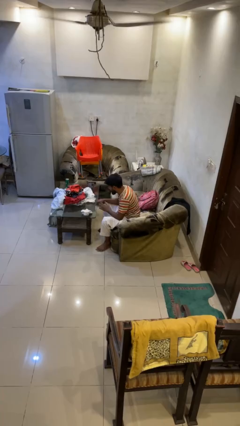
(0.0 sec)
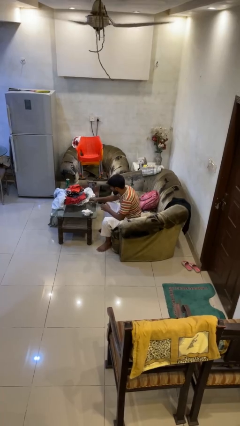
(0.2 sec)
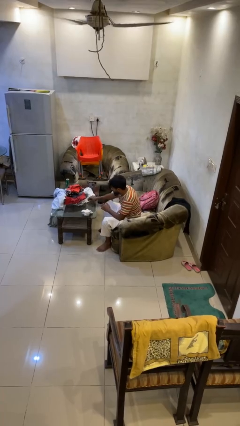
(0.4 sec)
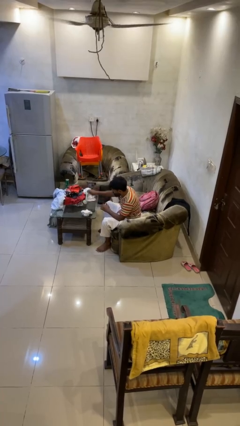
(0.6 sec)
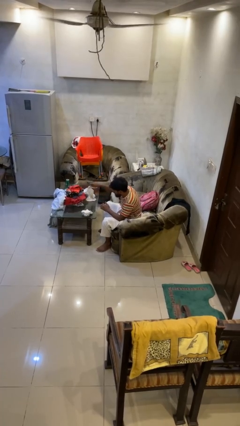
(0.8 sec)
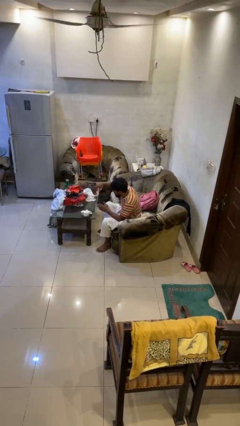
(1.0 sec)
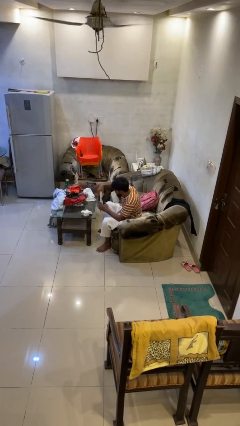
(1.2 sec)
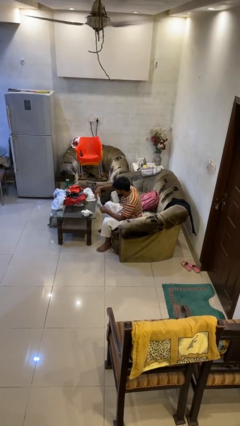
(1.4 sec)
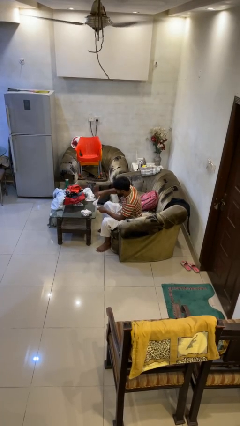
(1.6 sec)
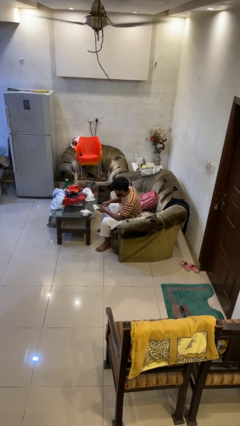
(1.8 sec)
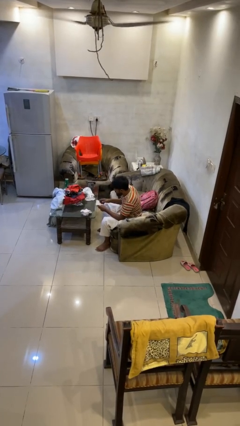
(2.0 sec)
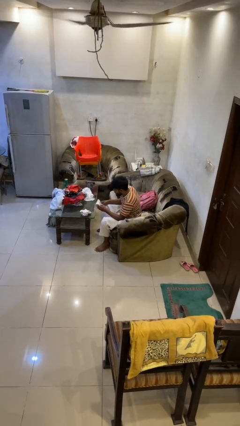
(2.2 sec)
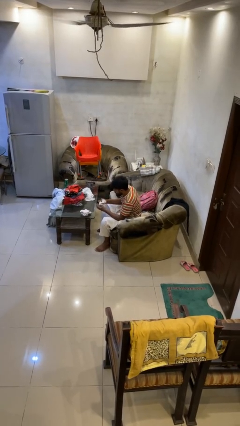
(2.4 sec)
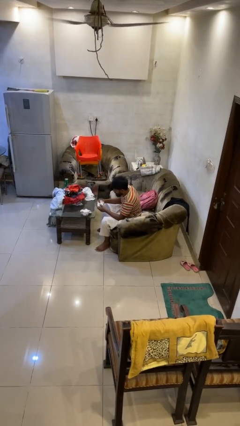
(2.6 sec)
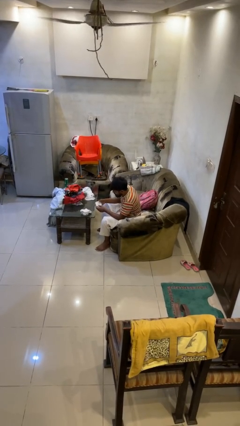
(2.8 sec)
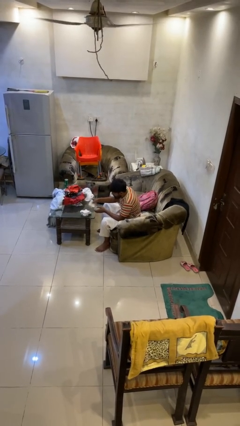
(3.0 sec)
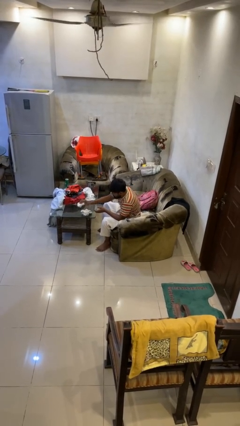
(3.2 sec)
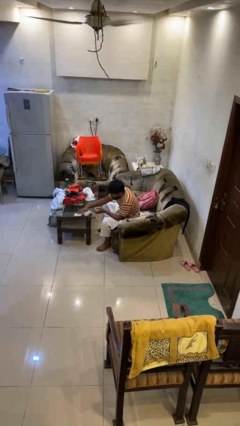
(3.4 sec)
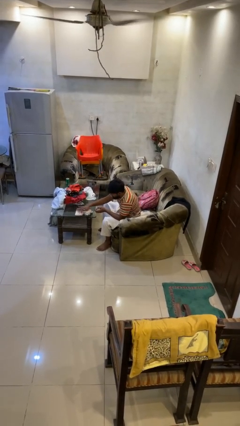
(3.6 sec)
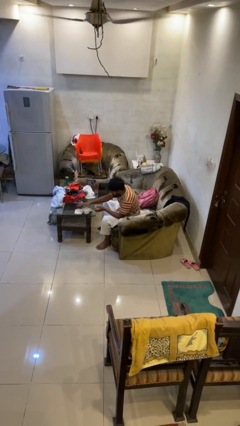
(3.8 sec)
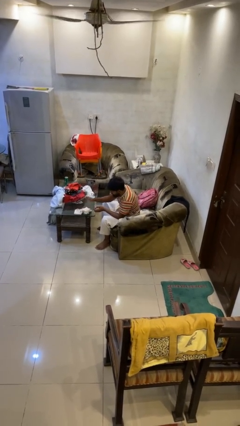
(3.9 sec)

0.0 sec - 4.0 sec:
person folds socks

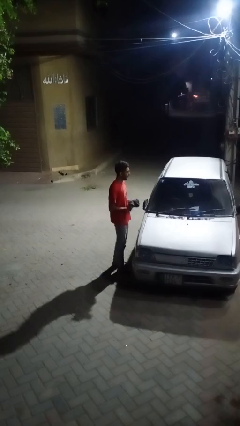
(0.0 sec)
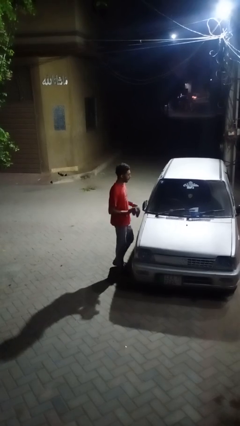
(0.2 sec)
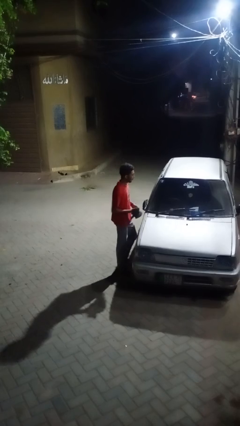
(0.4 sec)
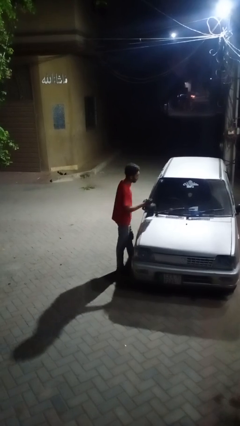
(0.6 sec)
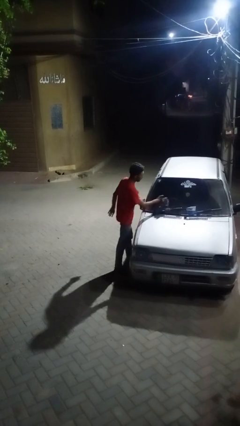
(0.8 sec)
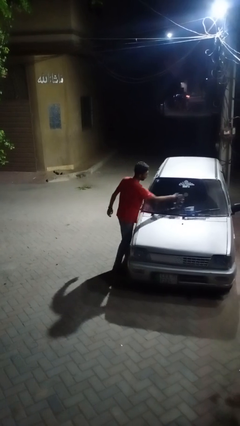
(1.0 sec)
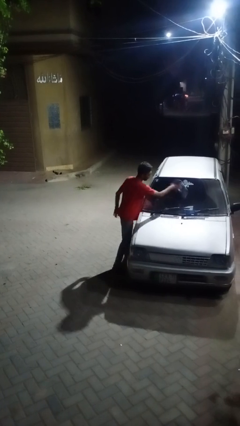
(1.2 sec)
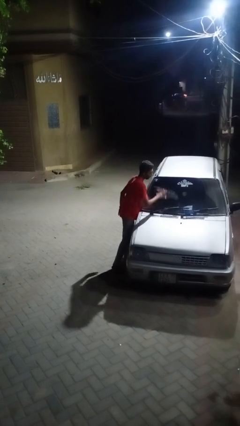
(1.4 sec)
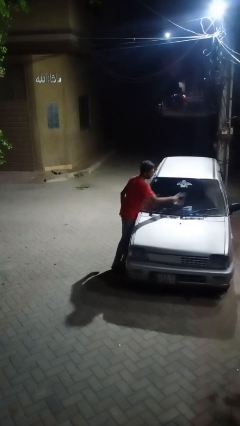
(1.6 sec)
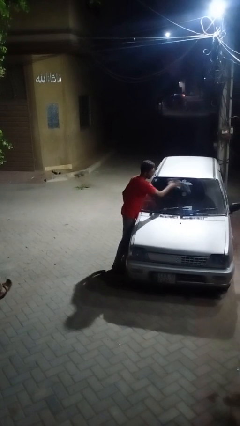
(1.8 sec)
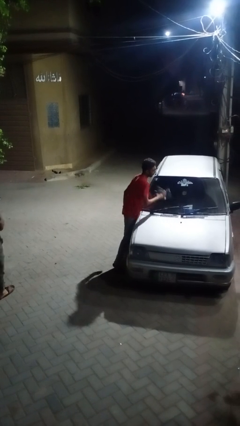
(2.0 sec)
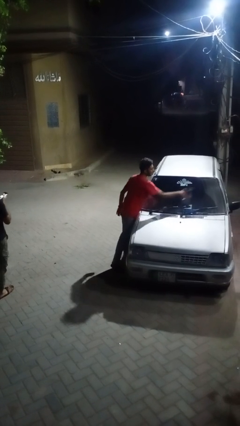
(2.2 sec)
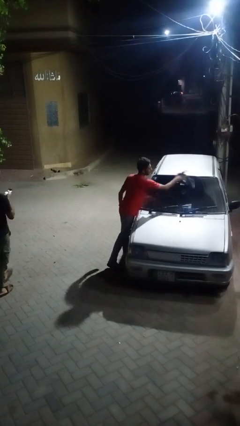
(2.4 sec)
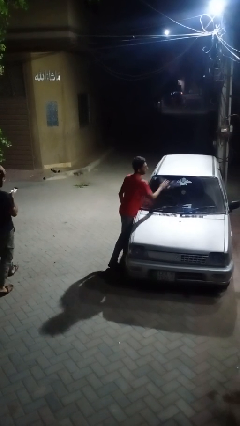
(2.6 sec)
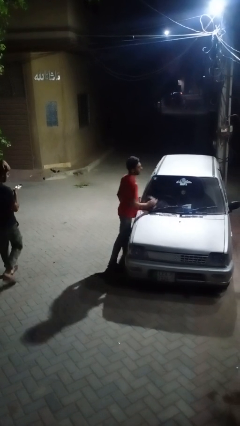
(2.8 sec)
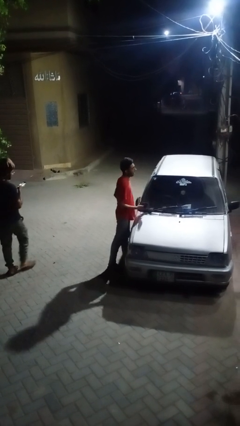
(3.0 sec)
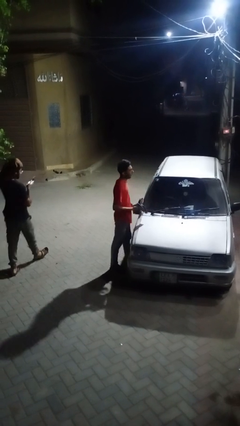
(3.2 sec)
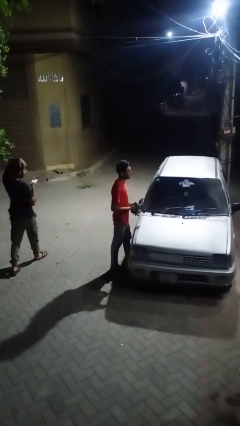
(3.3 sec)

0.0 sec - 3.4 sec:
person polishes car with rag

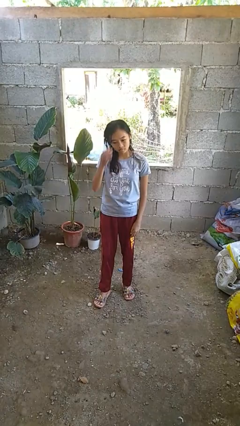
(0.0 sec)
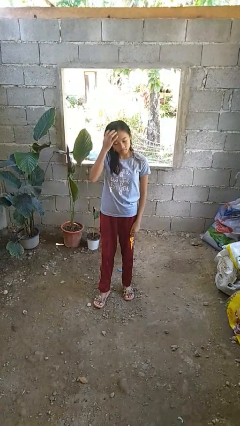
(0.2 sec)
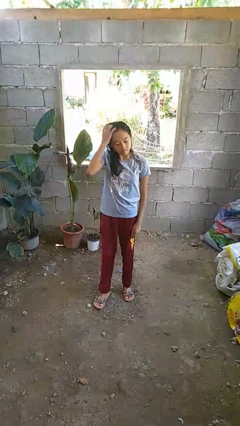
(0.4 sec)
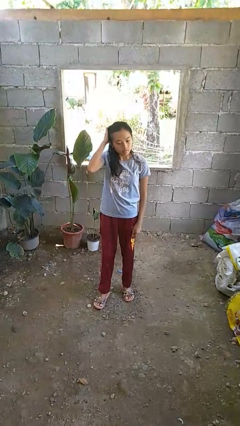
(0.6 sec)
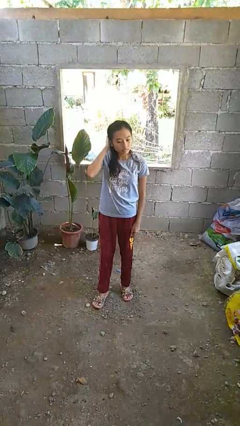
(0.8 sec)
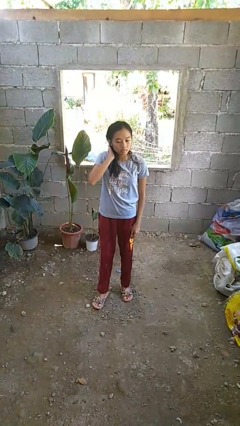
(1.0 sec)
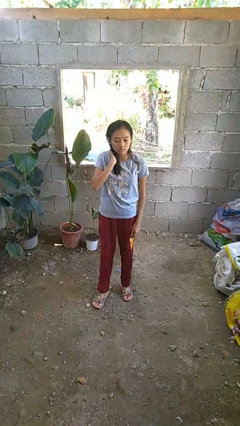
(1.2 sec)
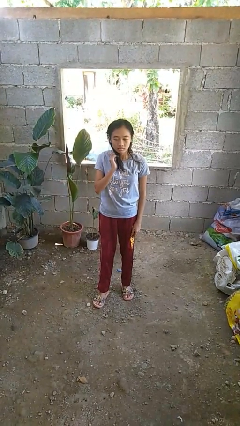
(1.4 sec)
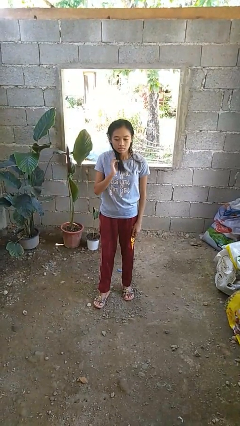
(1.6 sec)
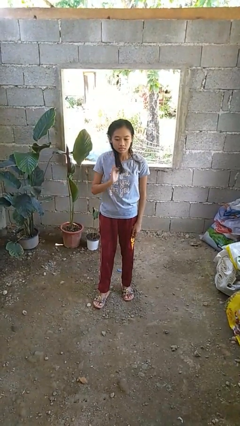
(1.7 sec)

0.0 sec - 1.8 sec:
person scratches face

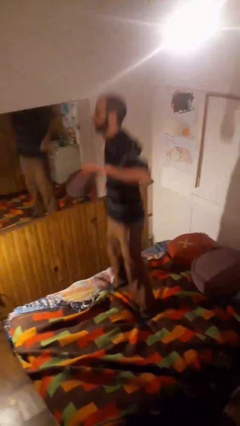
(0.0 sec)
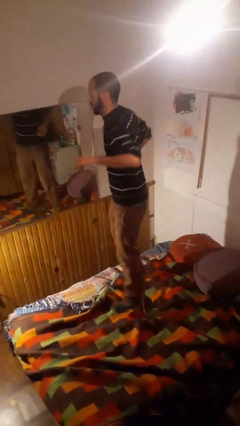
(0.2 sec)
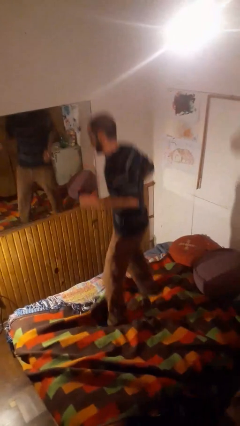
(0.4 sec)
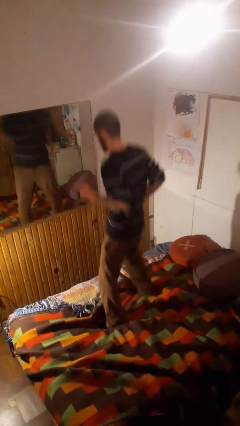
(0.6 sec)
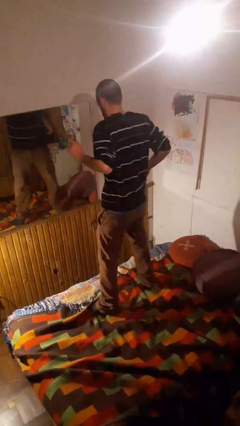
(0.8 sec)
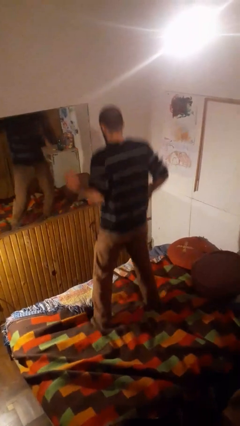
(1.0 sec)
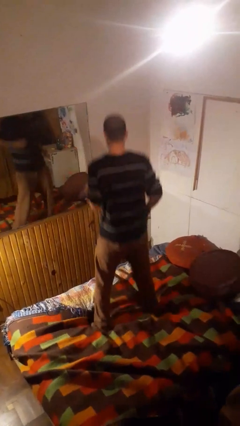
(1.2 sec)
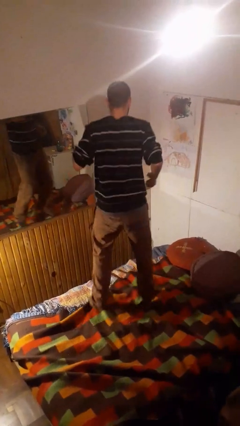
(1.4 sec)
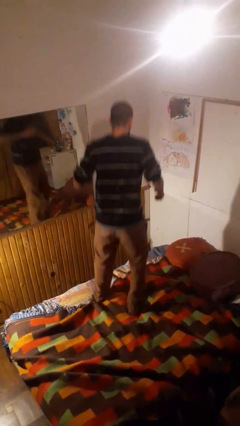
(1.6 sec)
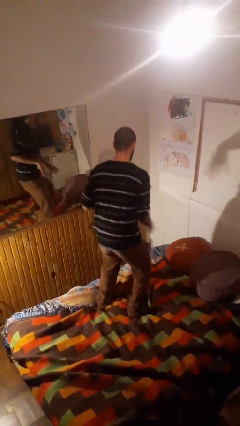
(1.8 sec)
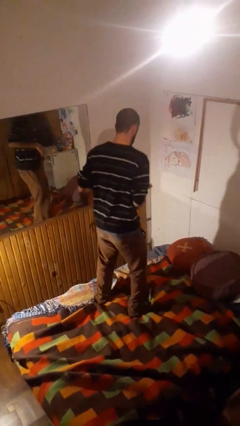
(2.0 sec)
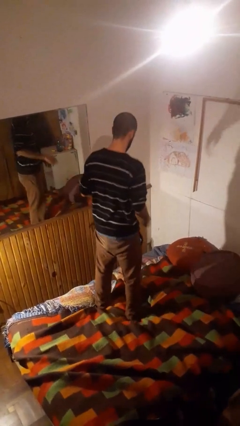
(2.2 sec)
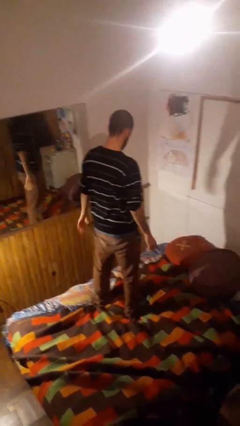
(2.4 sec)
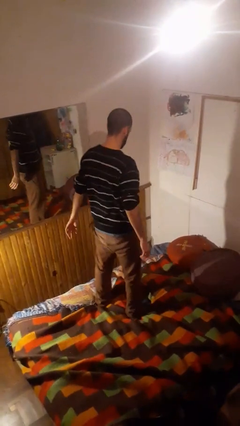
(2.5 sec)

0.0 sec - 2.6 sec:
person jumps on bed

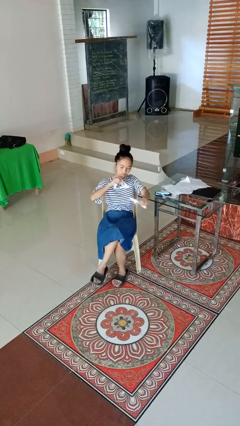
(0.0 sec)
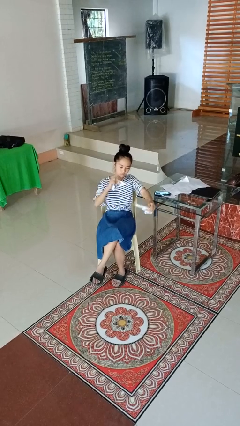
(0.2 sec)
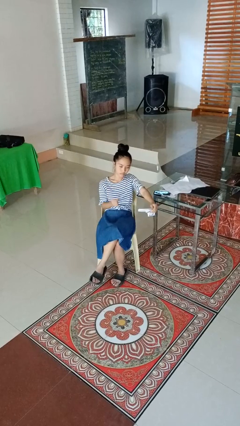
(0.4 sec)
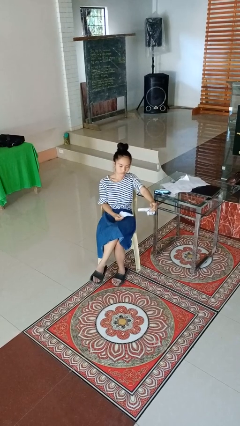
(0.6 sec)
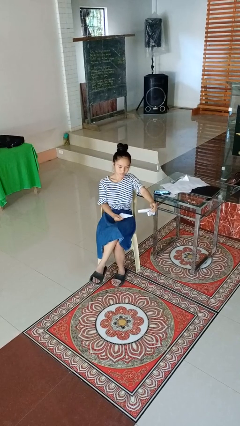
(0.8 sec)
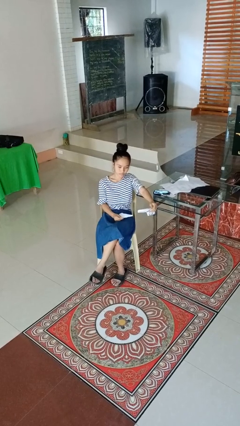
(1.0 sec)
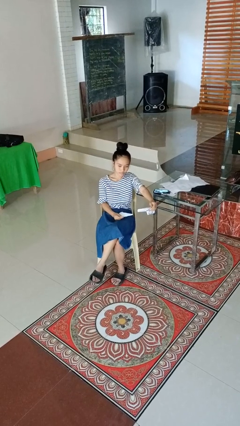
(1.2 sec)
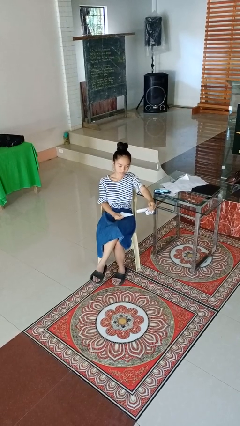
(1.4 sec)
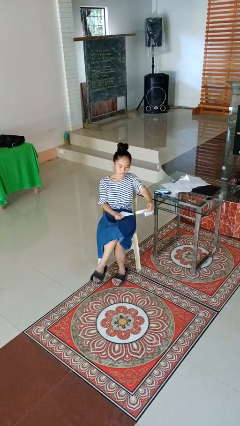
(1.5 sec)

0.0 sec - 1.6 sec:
person tears paper

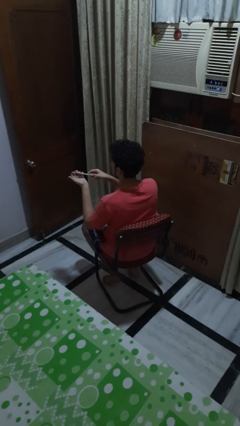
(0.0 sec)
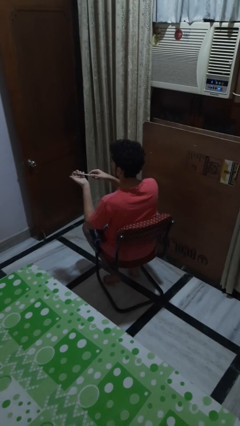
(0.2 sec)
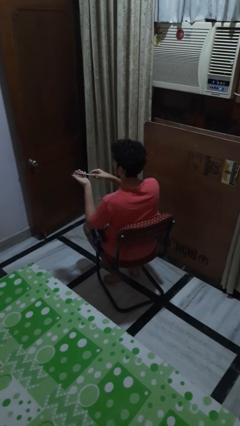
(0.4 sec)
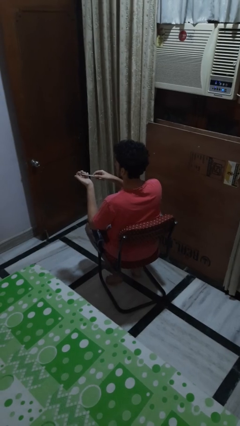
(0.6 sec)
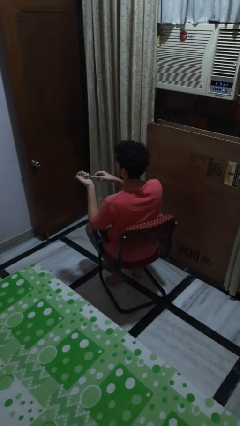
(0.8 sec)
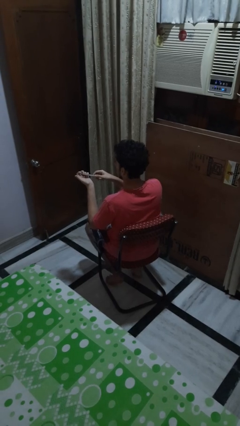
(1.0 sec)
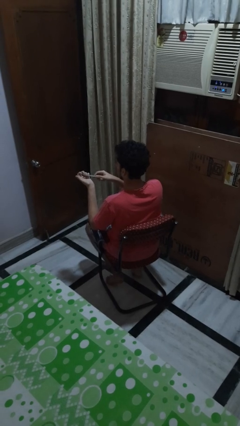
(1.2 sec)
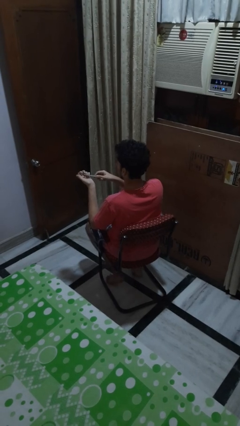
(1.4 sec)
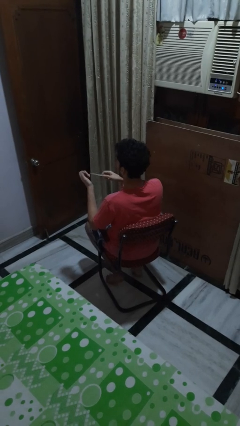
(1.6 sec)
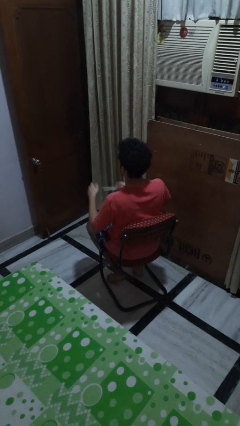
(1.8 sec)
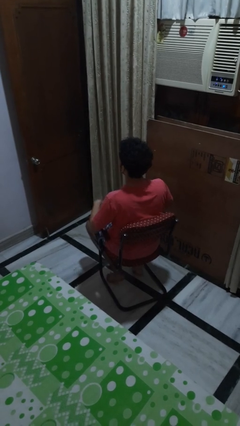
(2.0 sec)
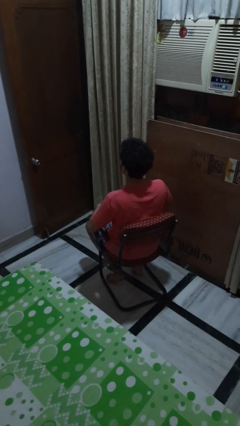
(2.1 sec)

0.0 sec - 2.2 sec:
person files fingernails

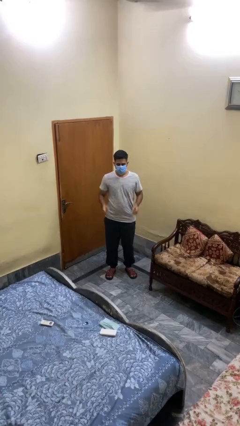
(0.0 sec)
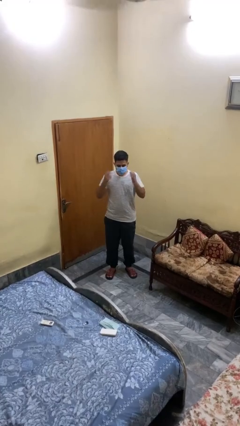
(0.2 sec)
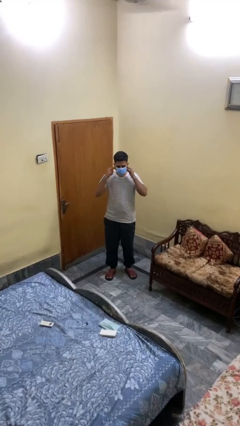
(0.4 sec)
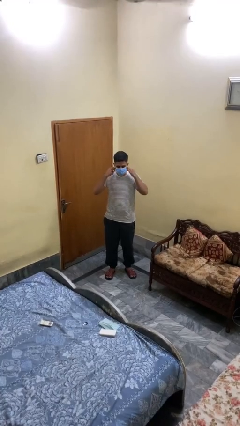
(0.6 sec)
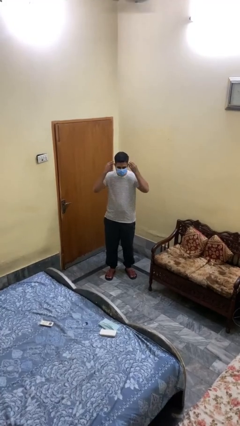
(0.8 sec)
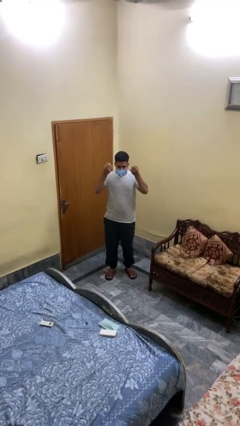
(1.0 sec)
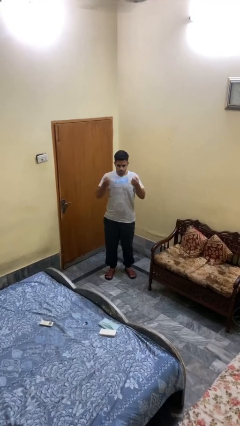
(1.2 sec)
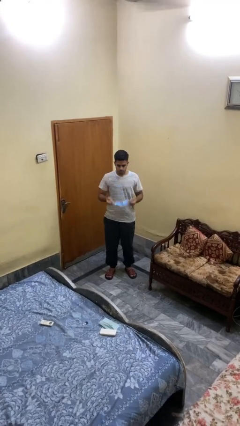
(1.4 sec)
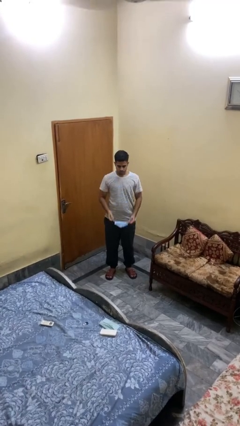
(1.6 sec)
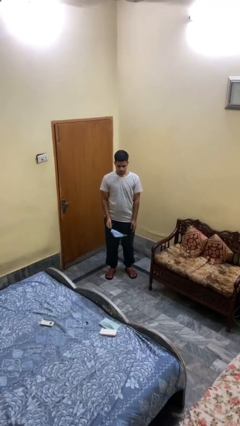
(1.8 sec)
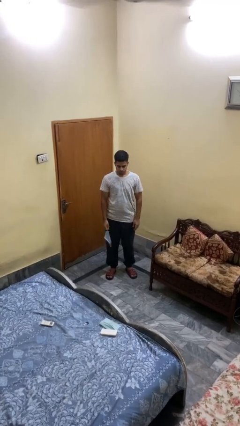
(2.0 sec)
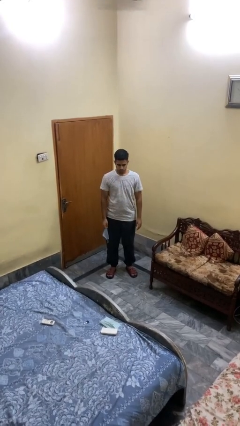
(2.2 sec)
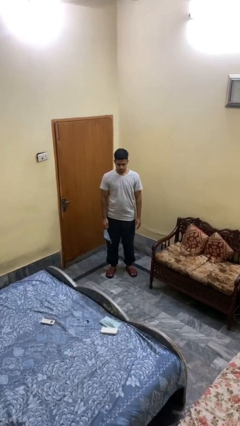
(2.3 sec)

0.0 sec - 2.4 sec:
person takes off facemask
